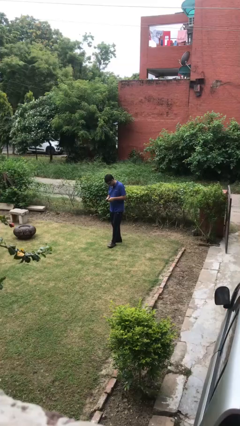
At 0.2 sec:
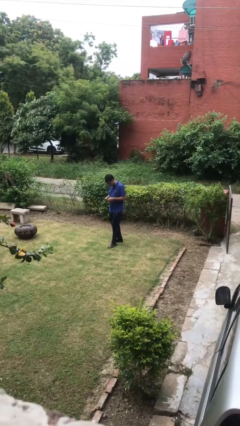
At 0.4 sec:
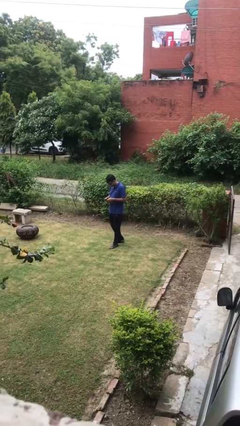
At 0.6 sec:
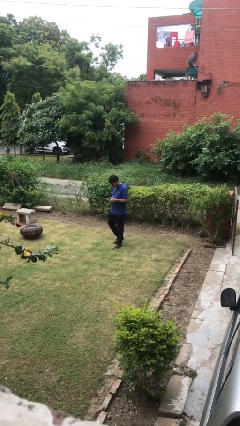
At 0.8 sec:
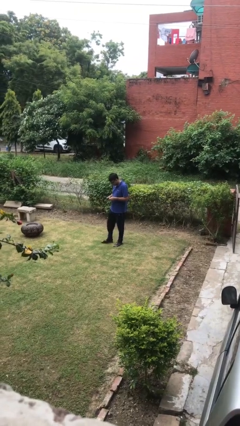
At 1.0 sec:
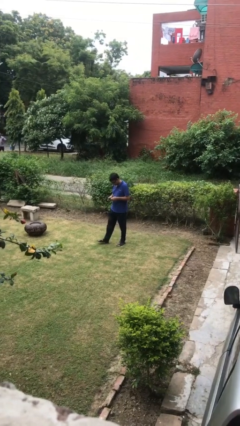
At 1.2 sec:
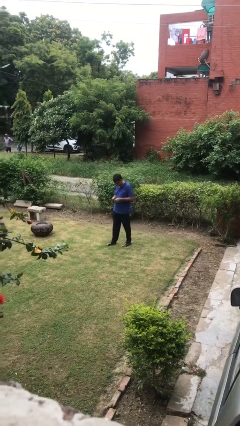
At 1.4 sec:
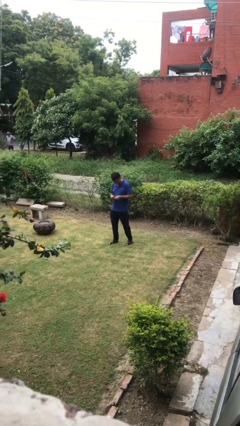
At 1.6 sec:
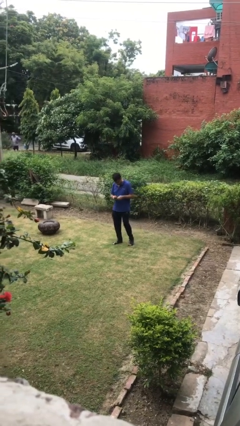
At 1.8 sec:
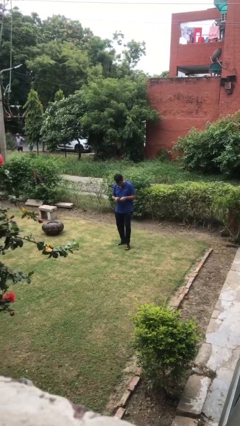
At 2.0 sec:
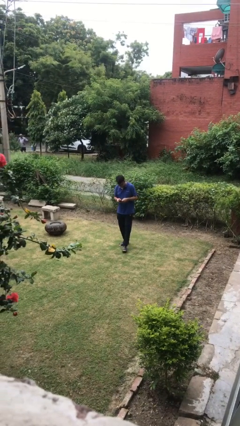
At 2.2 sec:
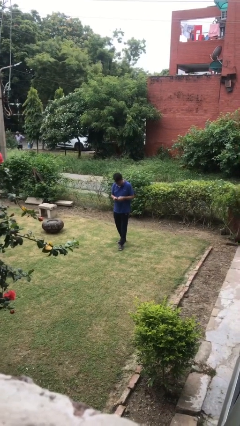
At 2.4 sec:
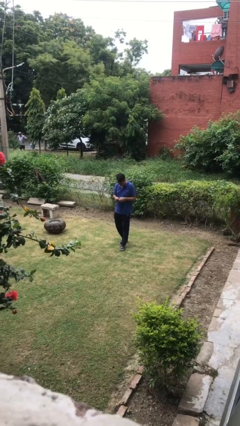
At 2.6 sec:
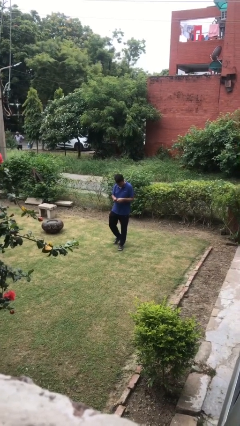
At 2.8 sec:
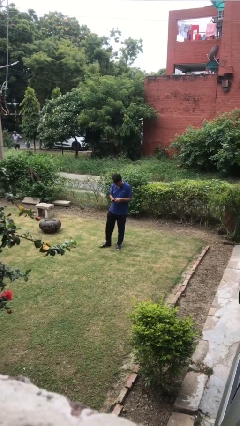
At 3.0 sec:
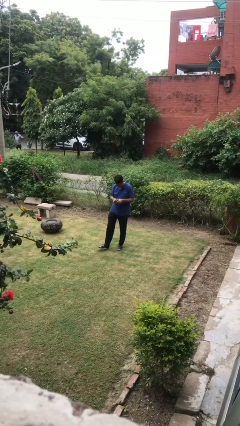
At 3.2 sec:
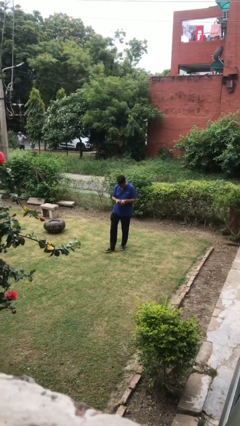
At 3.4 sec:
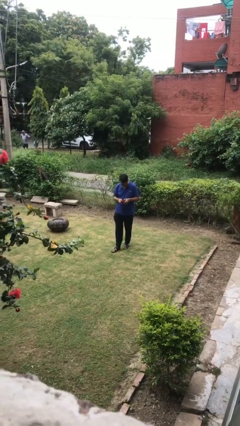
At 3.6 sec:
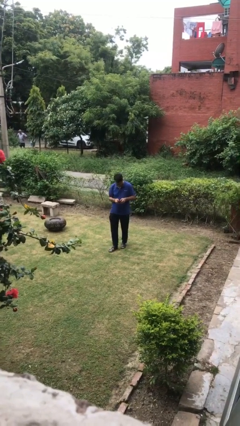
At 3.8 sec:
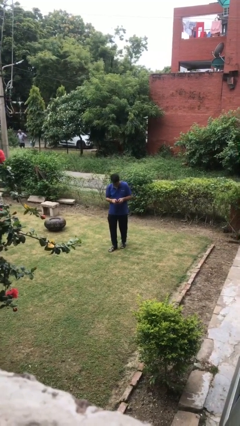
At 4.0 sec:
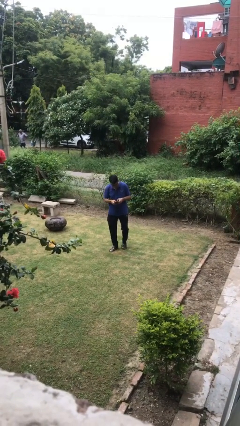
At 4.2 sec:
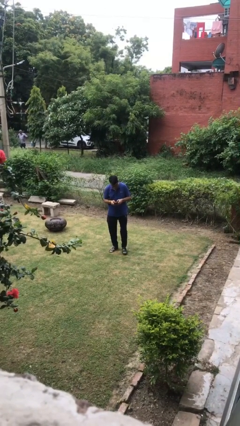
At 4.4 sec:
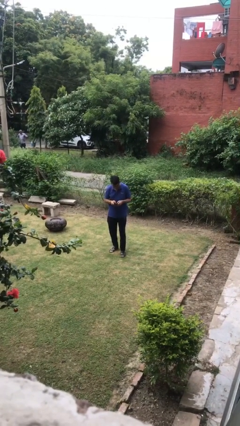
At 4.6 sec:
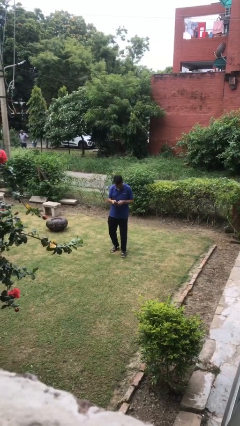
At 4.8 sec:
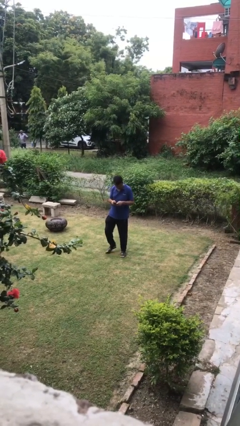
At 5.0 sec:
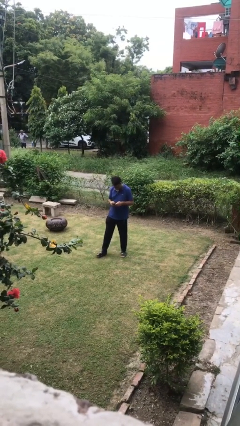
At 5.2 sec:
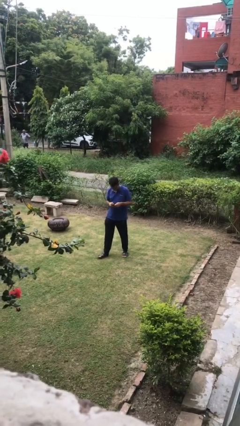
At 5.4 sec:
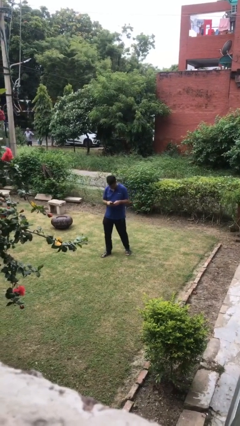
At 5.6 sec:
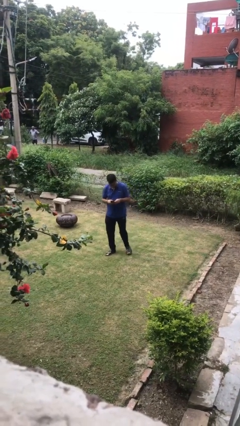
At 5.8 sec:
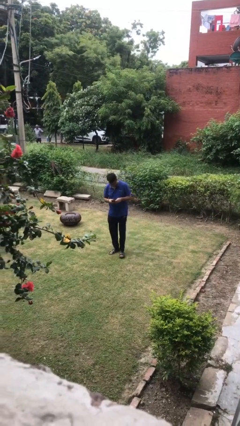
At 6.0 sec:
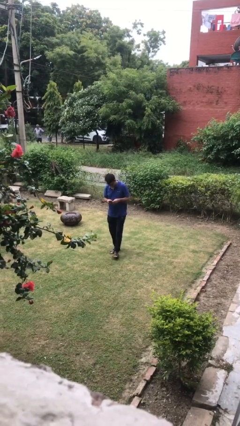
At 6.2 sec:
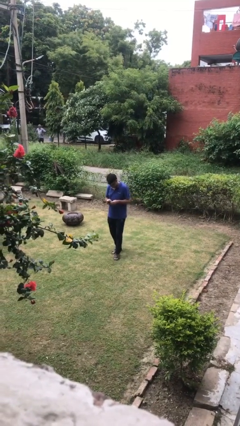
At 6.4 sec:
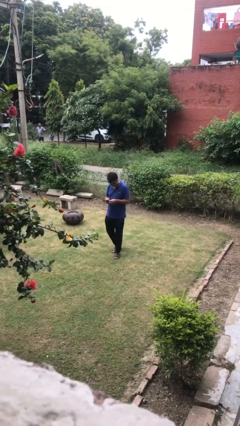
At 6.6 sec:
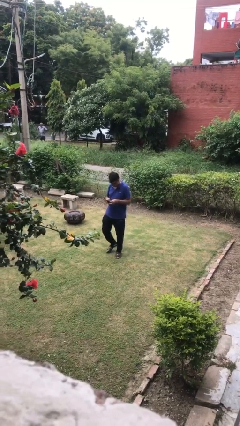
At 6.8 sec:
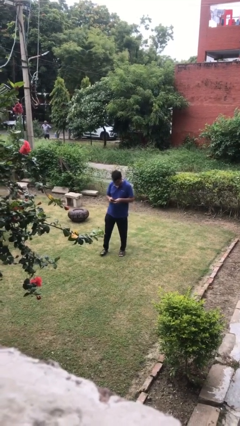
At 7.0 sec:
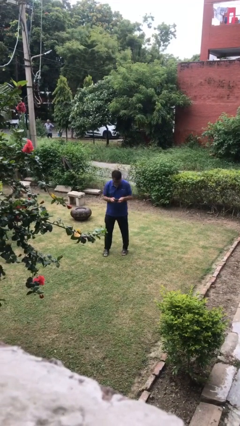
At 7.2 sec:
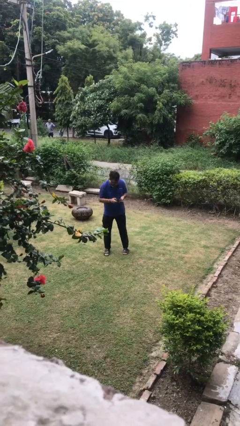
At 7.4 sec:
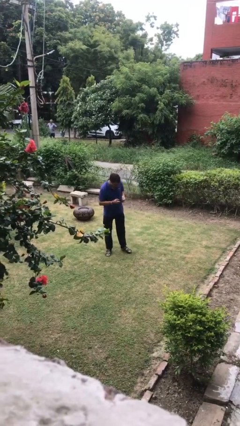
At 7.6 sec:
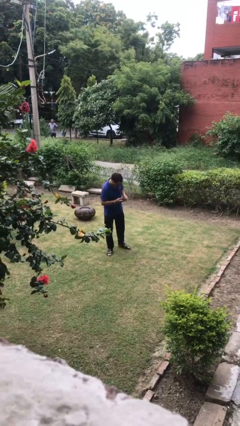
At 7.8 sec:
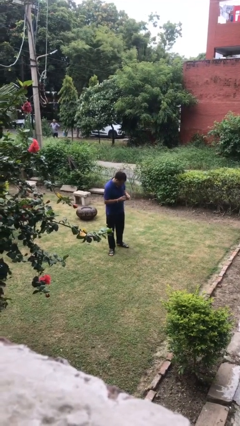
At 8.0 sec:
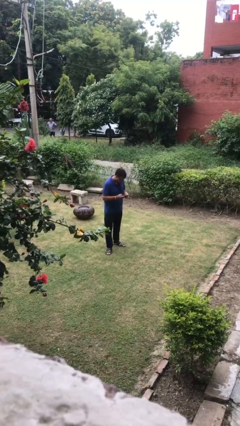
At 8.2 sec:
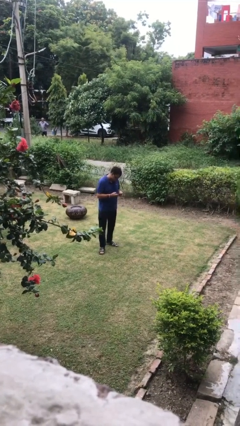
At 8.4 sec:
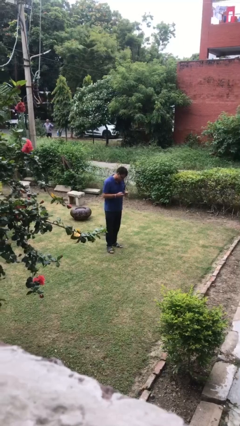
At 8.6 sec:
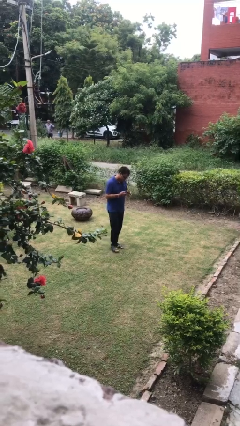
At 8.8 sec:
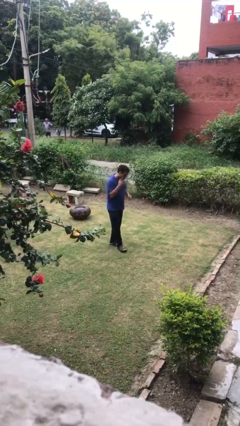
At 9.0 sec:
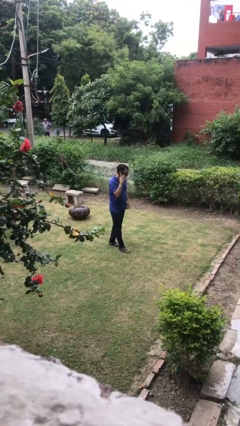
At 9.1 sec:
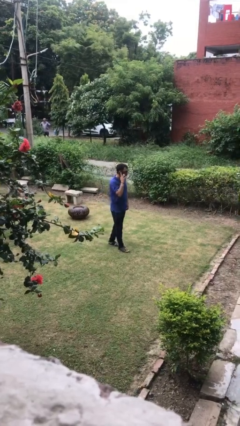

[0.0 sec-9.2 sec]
person texts on phone

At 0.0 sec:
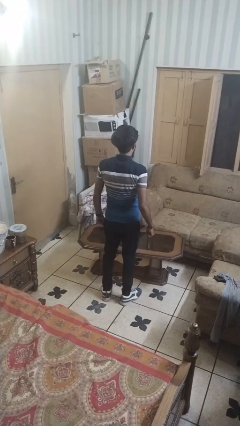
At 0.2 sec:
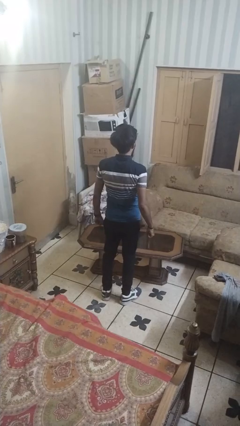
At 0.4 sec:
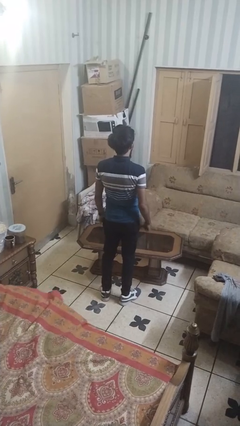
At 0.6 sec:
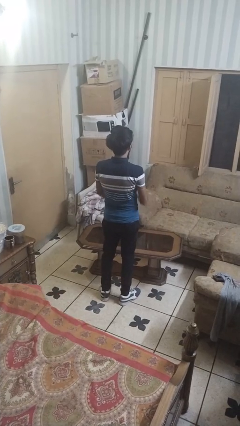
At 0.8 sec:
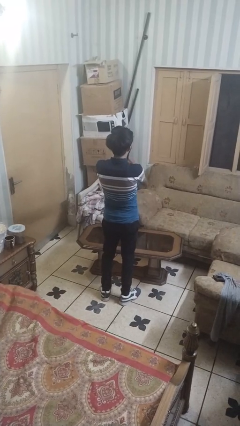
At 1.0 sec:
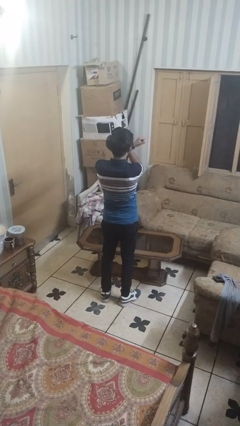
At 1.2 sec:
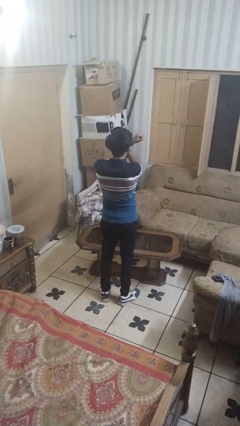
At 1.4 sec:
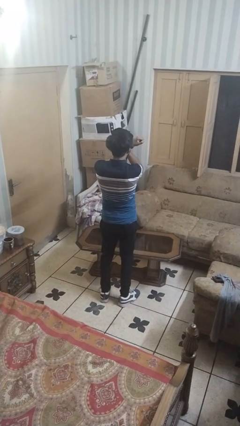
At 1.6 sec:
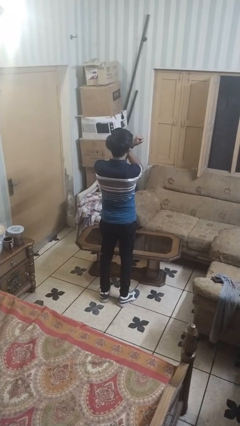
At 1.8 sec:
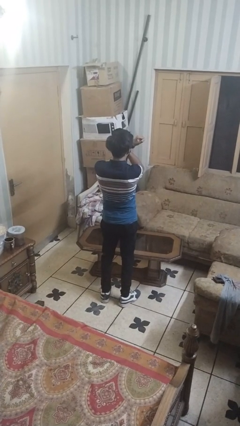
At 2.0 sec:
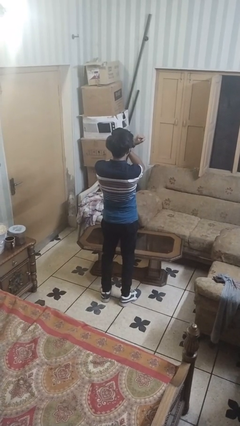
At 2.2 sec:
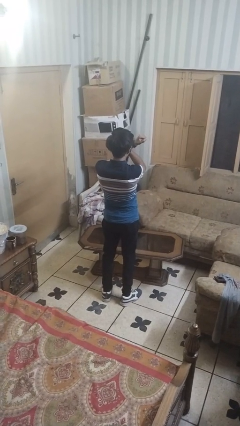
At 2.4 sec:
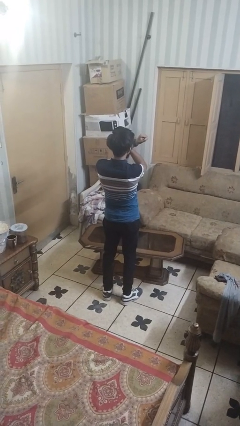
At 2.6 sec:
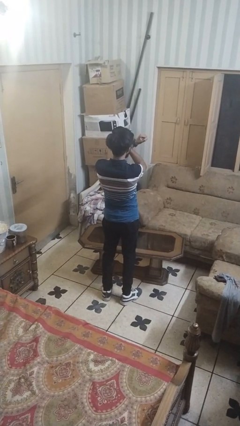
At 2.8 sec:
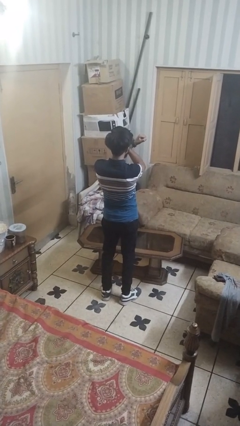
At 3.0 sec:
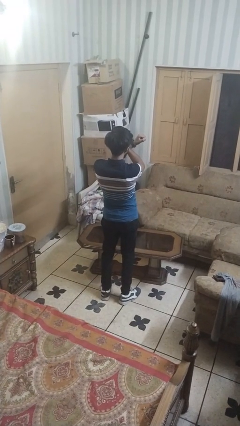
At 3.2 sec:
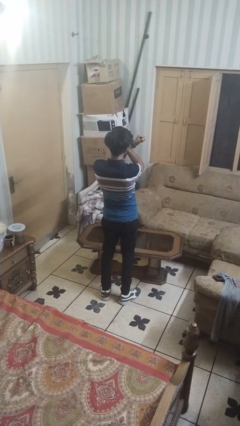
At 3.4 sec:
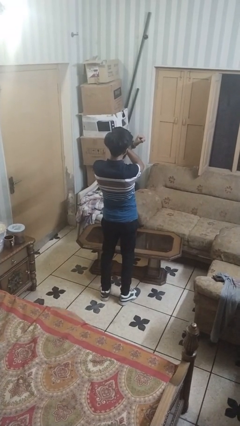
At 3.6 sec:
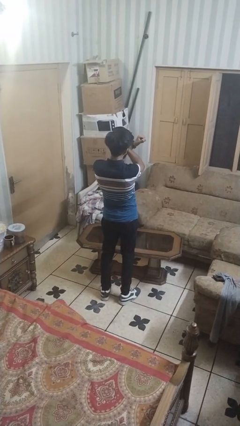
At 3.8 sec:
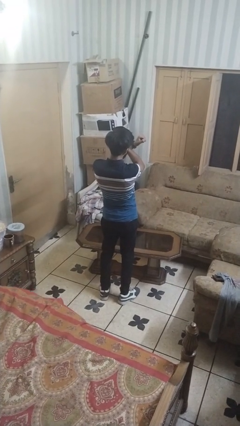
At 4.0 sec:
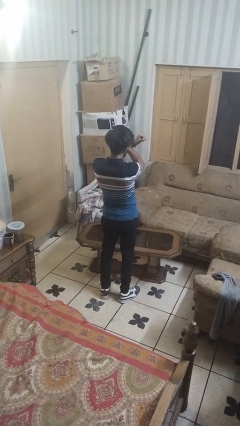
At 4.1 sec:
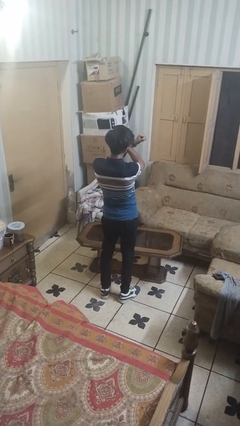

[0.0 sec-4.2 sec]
person gestures arms x

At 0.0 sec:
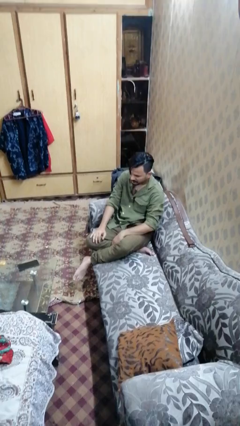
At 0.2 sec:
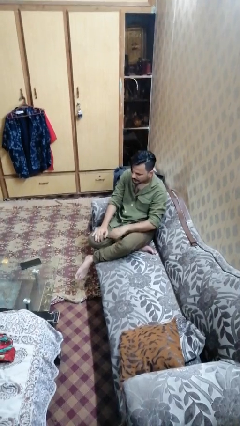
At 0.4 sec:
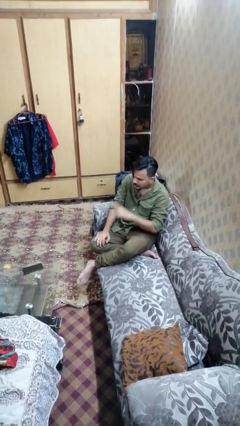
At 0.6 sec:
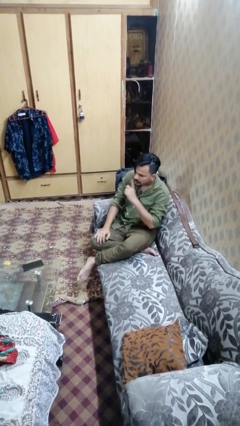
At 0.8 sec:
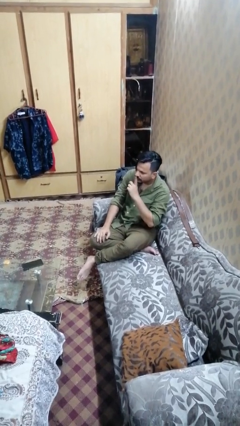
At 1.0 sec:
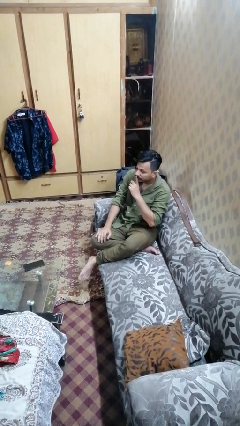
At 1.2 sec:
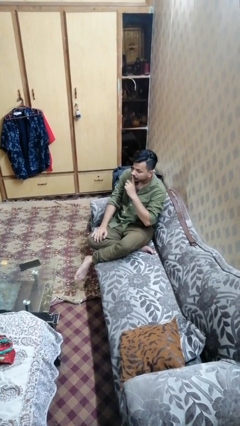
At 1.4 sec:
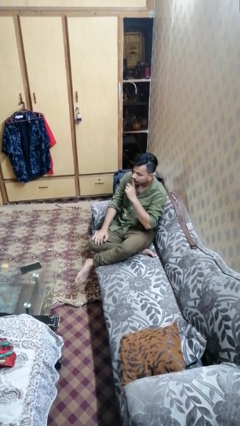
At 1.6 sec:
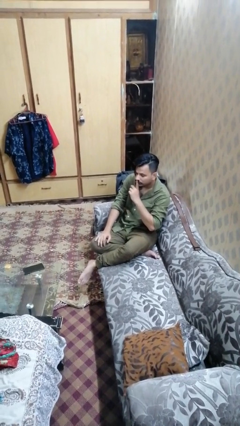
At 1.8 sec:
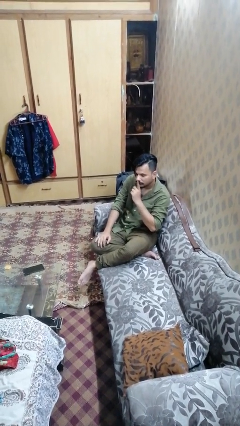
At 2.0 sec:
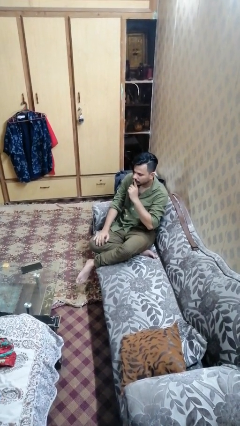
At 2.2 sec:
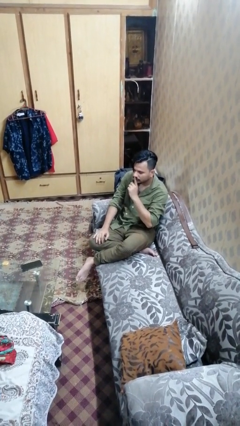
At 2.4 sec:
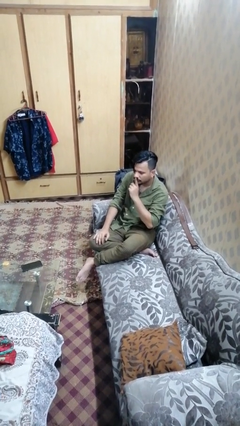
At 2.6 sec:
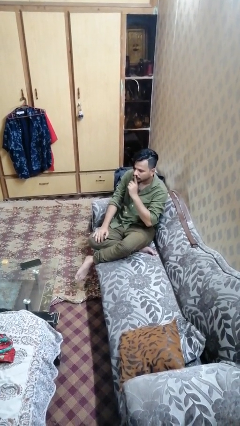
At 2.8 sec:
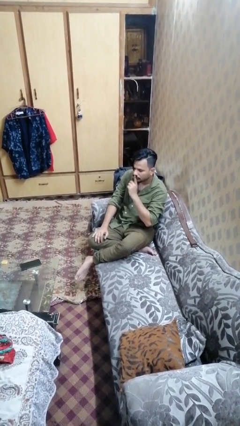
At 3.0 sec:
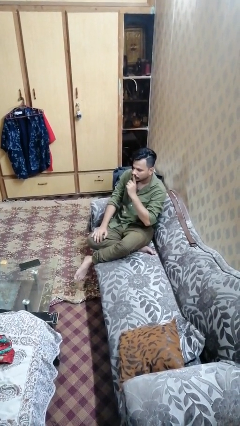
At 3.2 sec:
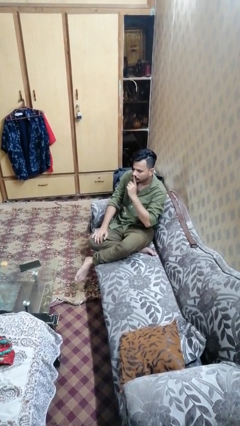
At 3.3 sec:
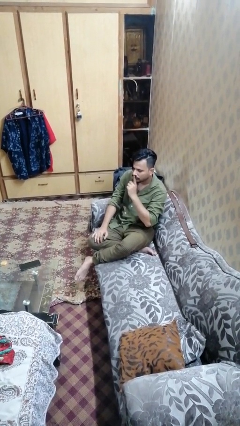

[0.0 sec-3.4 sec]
person gestures be quiet

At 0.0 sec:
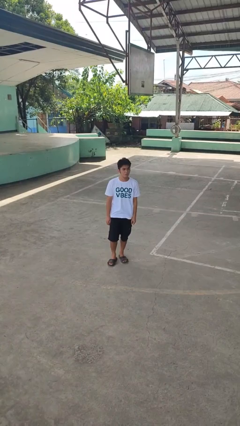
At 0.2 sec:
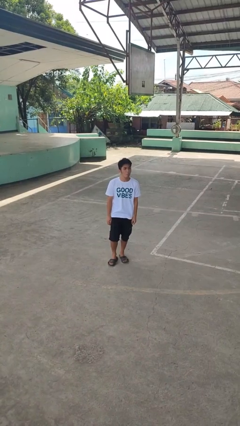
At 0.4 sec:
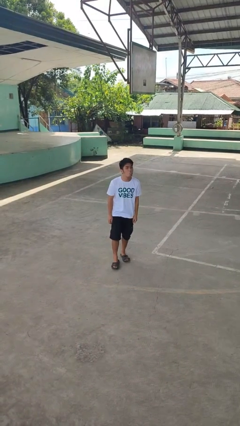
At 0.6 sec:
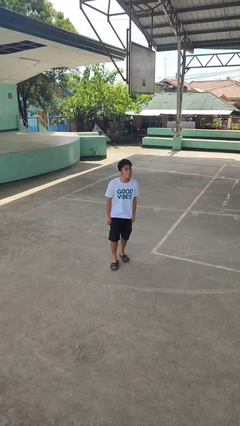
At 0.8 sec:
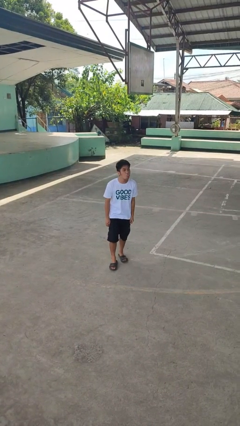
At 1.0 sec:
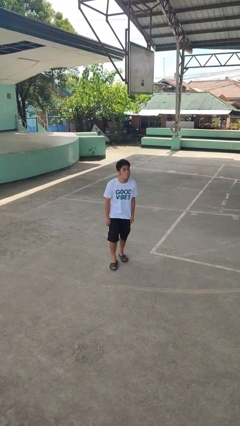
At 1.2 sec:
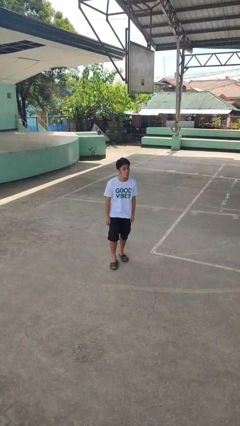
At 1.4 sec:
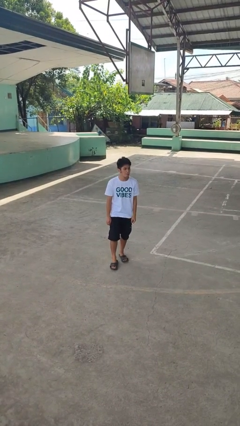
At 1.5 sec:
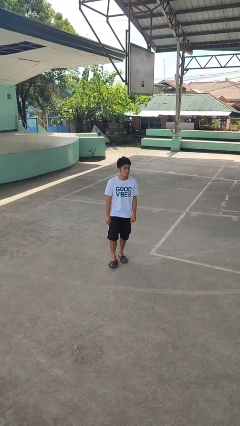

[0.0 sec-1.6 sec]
person sticks out tongue
